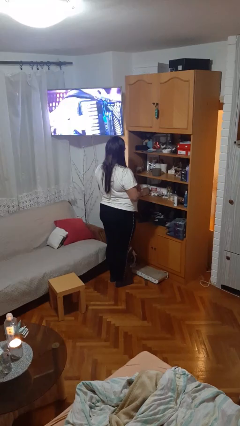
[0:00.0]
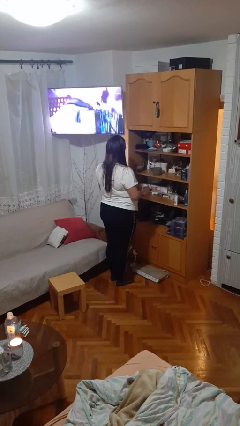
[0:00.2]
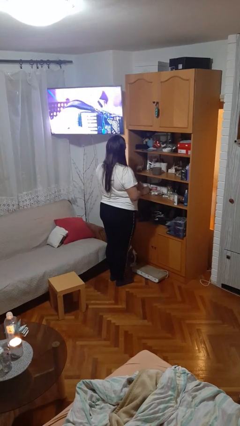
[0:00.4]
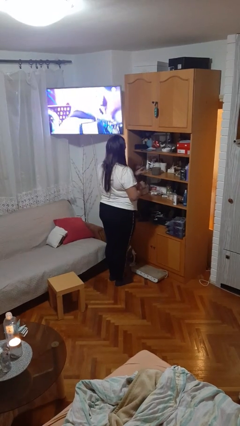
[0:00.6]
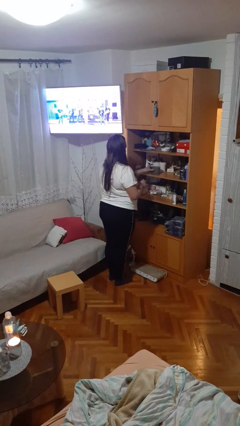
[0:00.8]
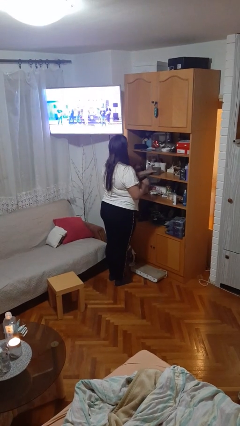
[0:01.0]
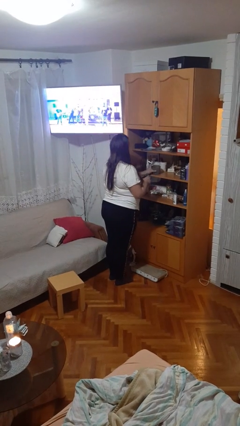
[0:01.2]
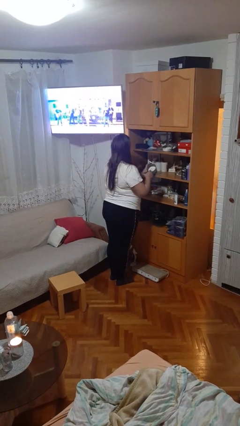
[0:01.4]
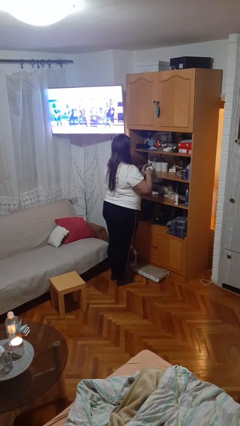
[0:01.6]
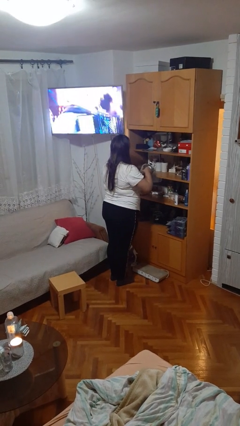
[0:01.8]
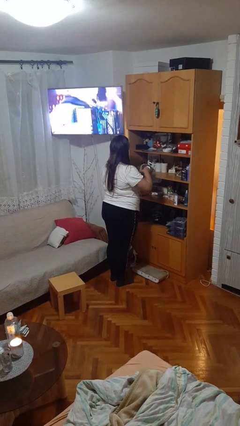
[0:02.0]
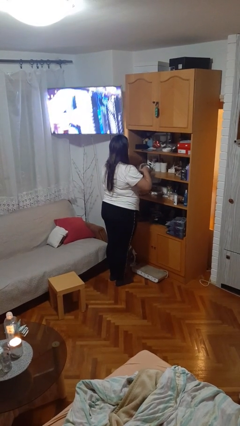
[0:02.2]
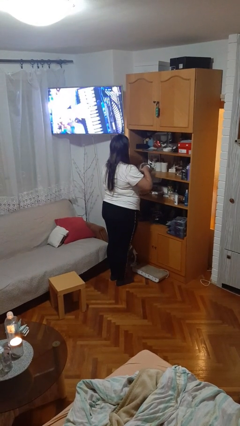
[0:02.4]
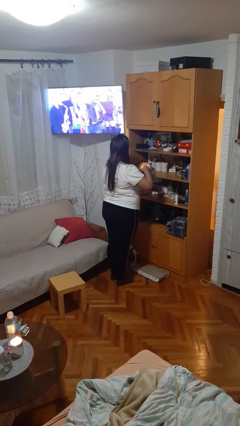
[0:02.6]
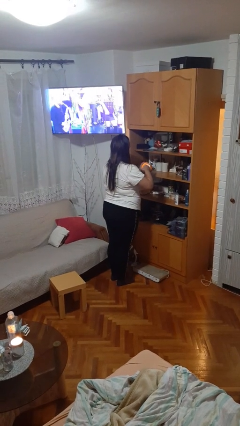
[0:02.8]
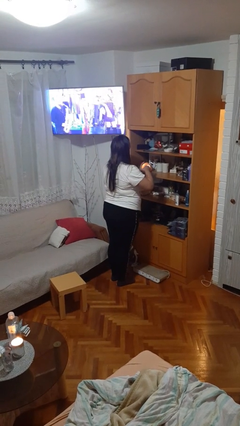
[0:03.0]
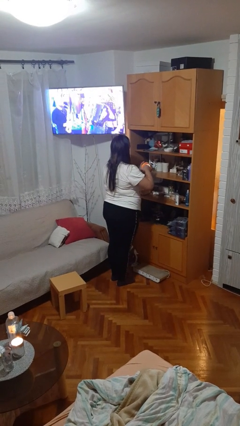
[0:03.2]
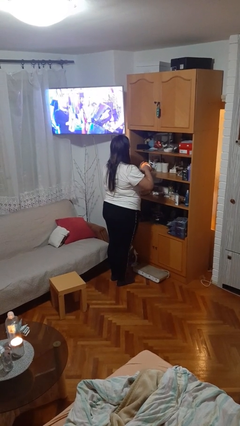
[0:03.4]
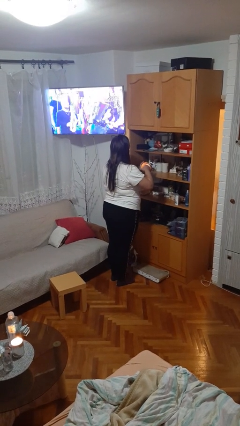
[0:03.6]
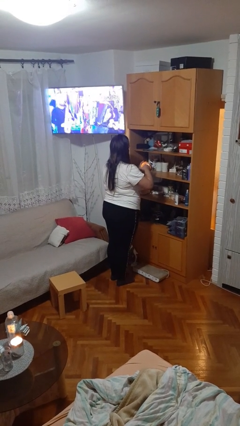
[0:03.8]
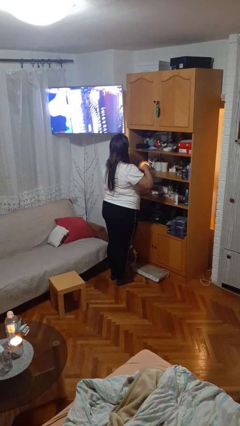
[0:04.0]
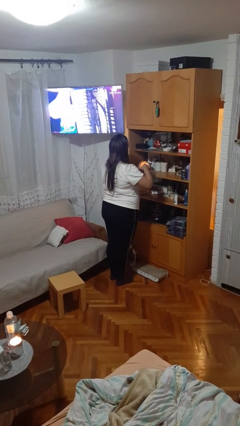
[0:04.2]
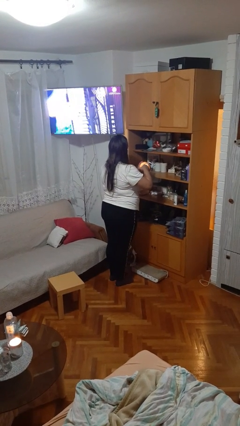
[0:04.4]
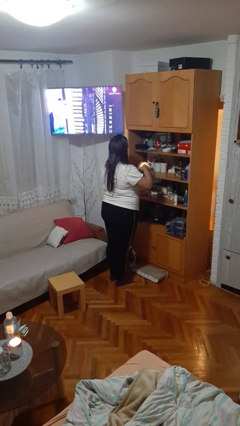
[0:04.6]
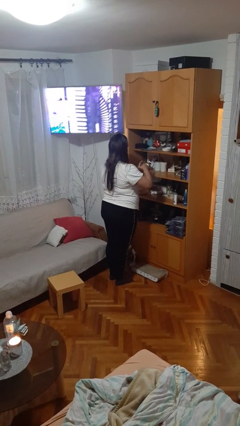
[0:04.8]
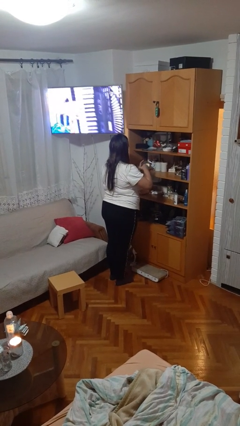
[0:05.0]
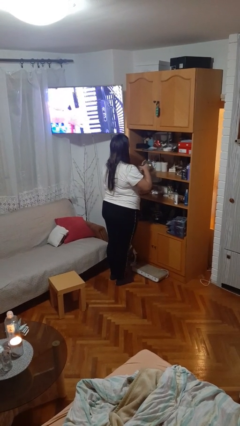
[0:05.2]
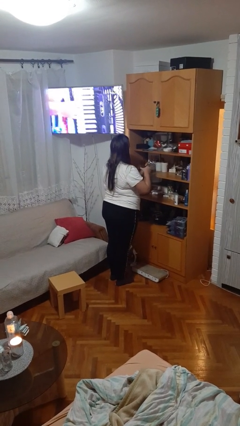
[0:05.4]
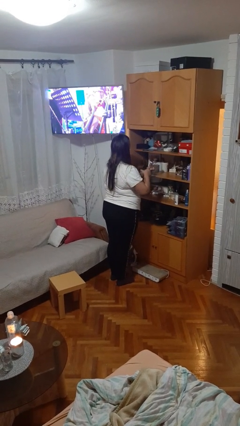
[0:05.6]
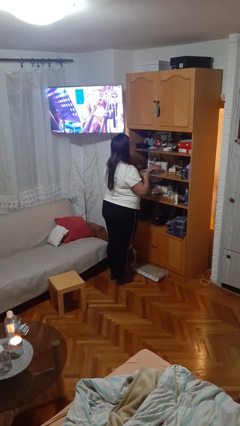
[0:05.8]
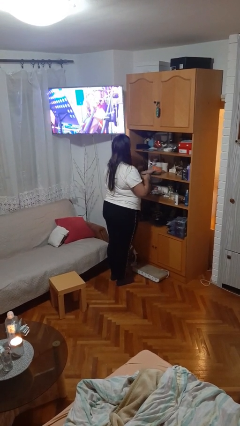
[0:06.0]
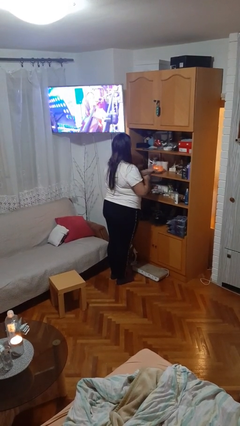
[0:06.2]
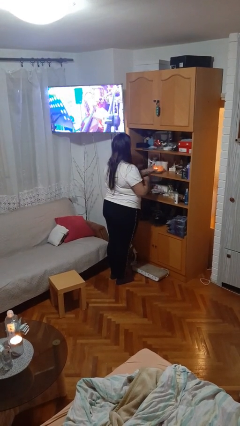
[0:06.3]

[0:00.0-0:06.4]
person lights candle

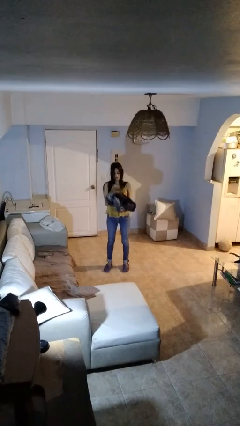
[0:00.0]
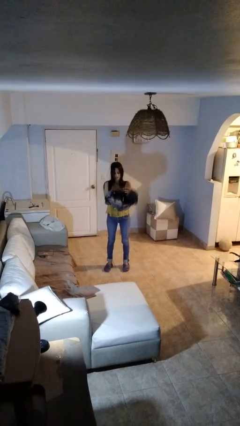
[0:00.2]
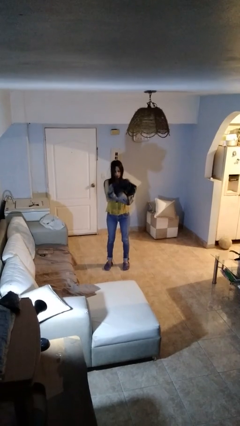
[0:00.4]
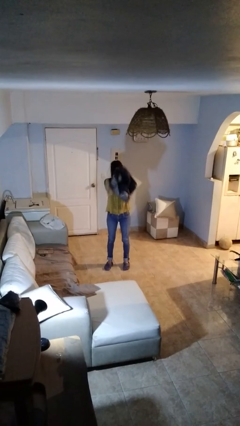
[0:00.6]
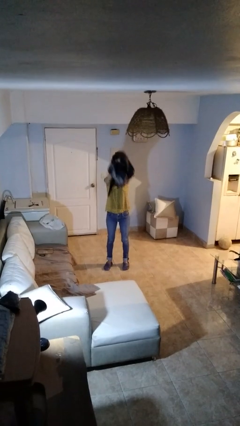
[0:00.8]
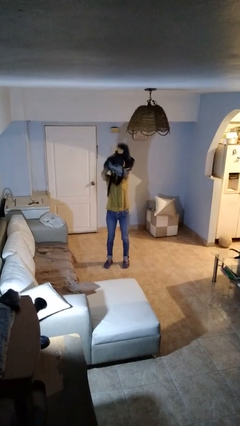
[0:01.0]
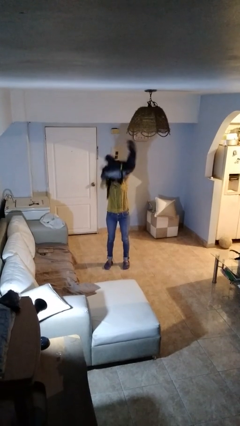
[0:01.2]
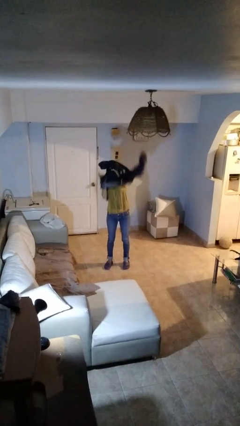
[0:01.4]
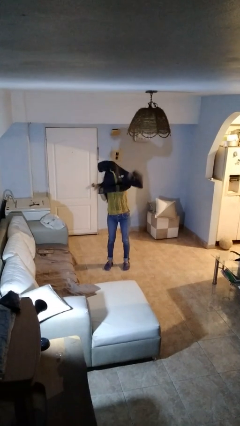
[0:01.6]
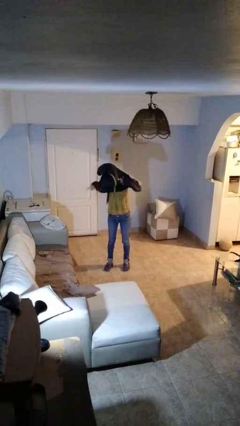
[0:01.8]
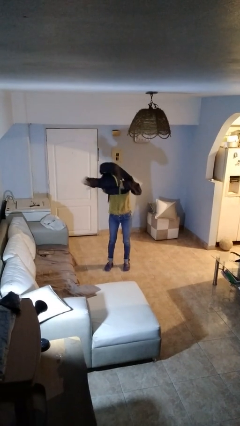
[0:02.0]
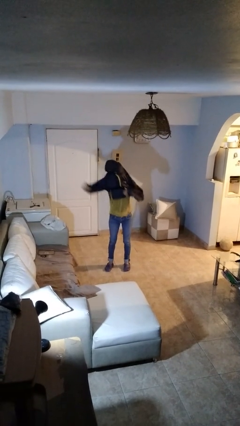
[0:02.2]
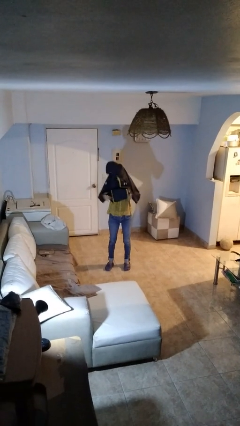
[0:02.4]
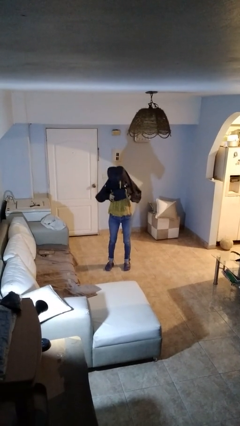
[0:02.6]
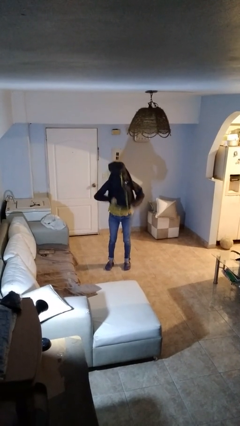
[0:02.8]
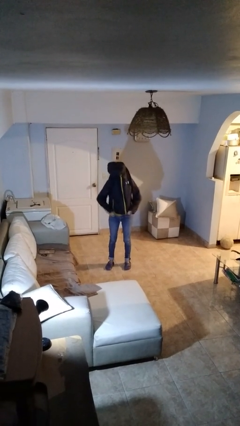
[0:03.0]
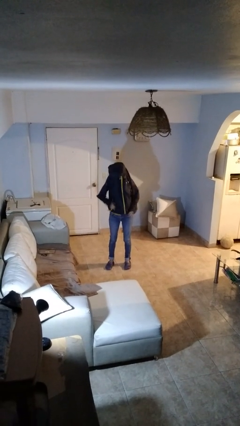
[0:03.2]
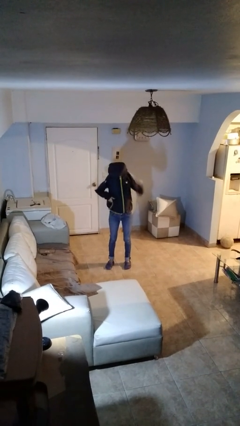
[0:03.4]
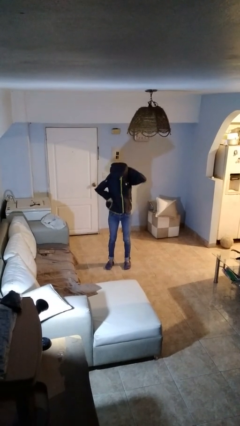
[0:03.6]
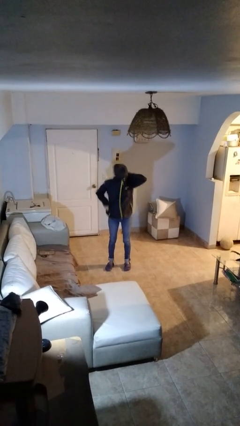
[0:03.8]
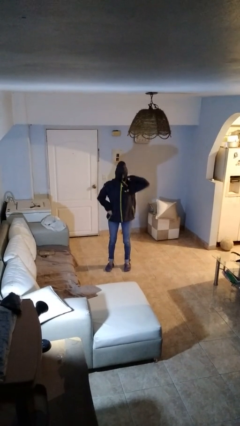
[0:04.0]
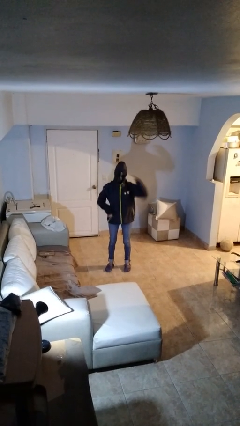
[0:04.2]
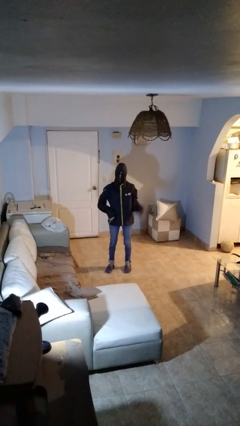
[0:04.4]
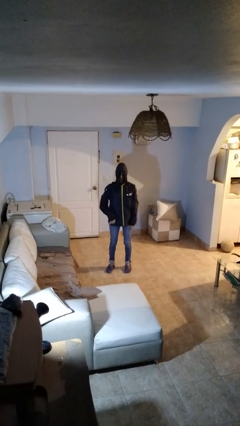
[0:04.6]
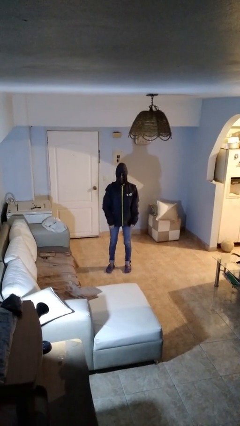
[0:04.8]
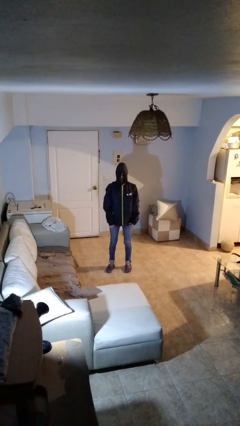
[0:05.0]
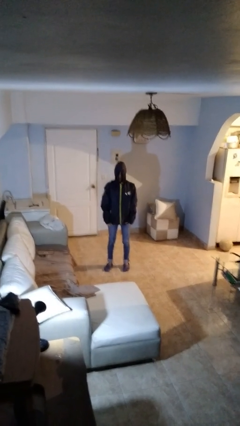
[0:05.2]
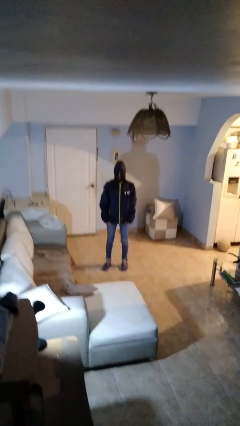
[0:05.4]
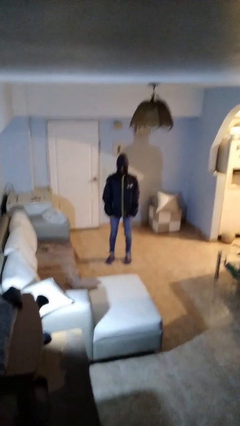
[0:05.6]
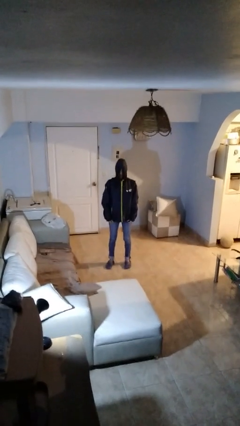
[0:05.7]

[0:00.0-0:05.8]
person puts on hoodie

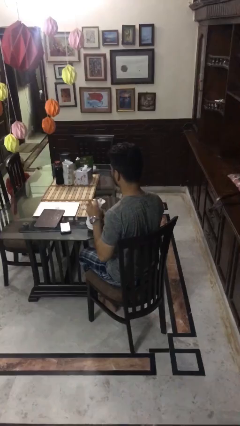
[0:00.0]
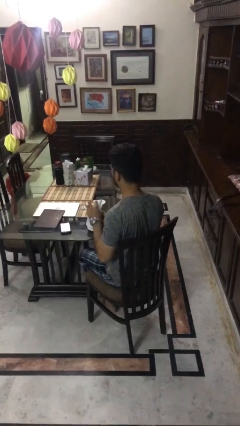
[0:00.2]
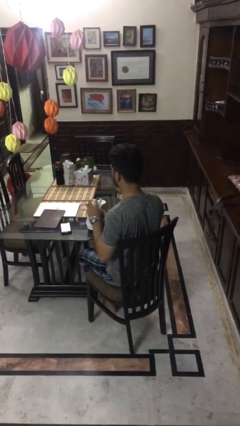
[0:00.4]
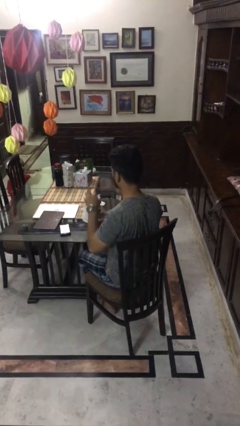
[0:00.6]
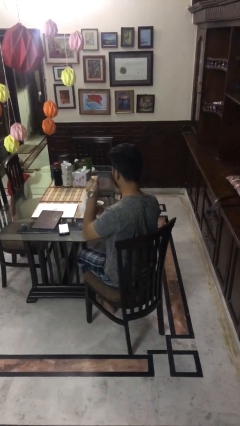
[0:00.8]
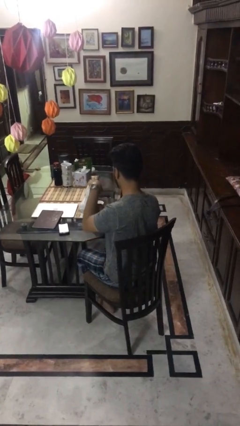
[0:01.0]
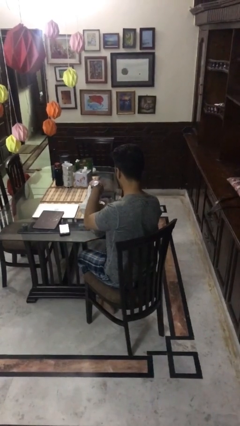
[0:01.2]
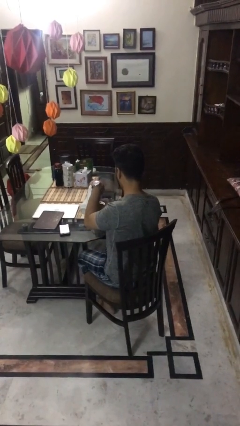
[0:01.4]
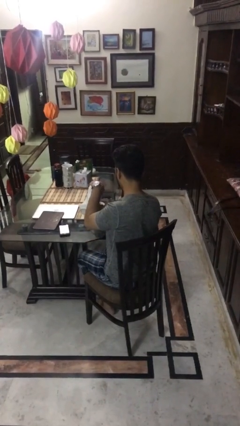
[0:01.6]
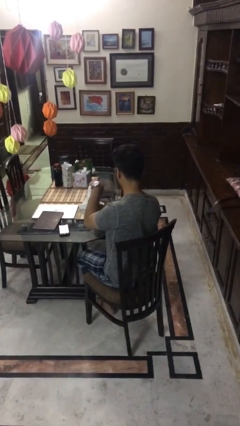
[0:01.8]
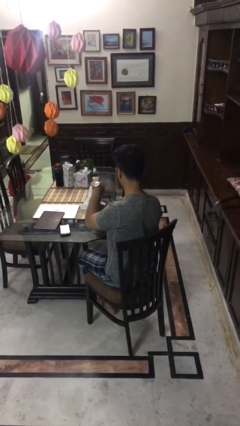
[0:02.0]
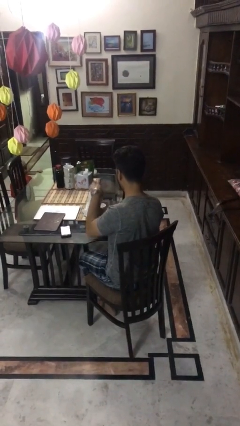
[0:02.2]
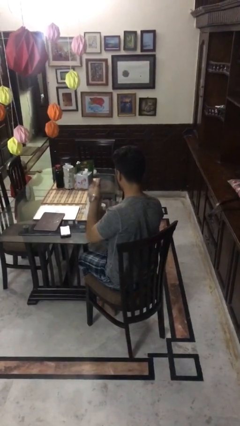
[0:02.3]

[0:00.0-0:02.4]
person pours coffee into mug

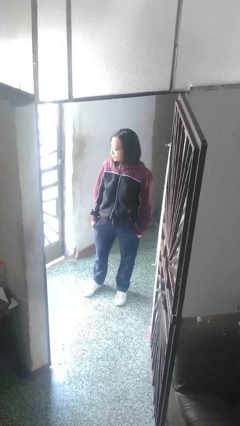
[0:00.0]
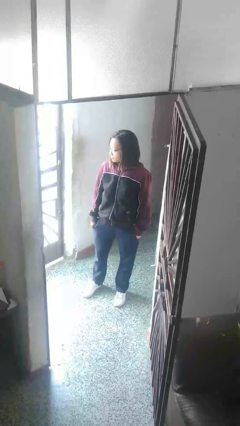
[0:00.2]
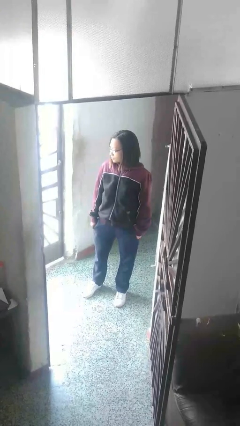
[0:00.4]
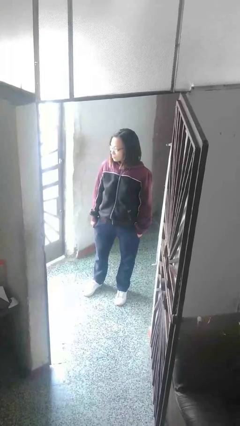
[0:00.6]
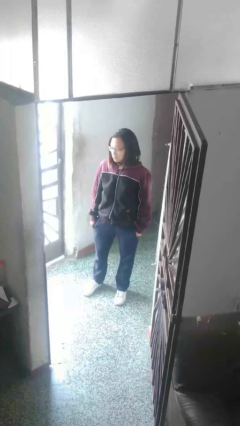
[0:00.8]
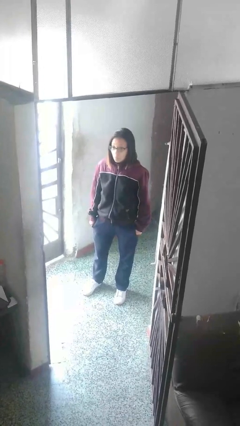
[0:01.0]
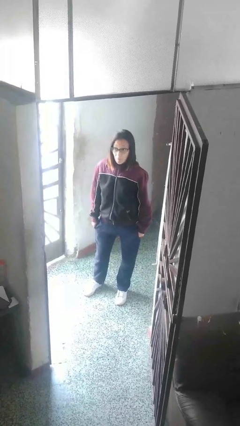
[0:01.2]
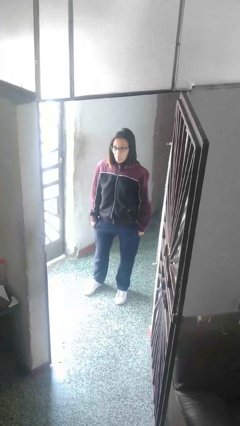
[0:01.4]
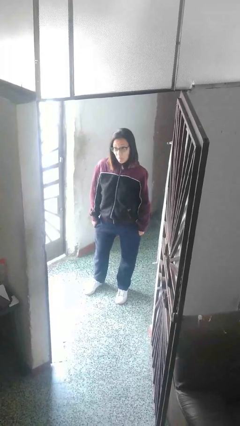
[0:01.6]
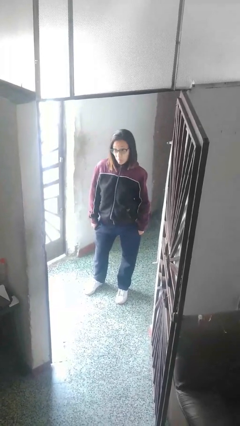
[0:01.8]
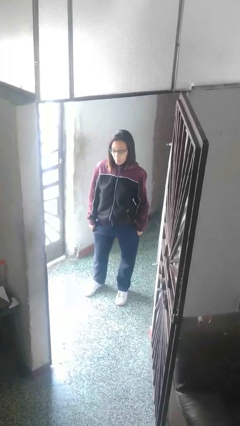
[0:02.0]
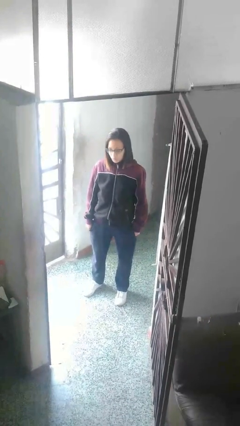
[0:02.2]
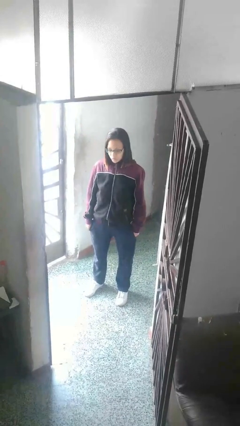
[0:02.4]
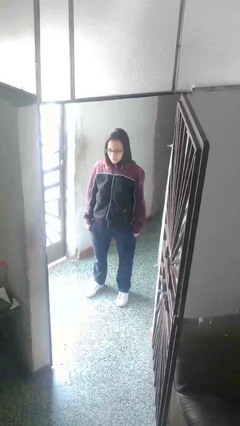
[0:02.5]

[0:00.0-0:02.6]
person sticks out tongue

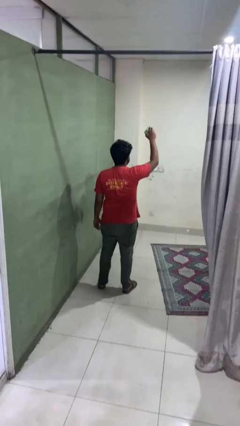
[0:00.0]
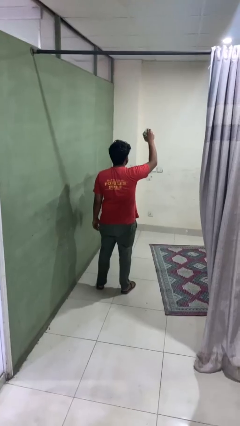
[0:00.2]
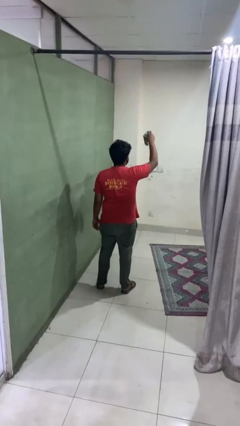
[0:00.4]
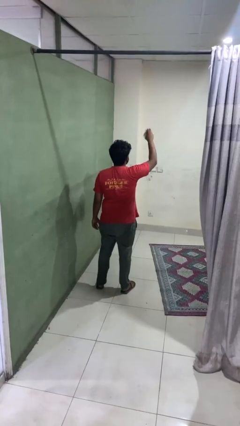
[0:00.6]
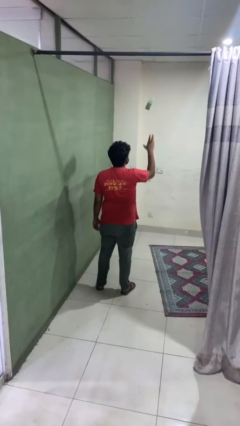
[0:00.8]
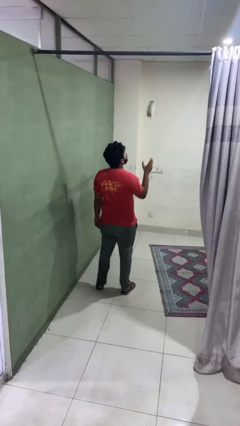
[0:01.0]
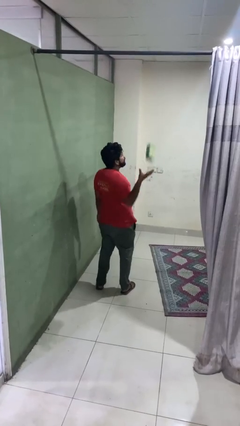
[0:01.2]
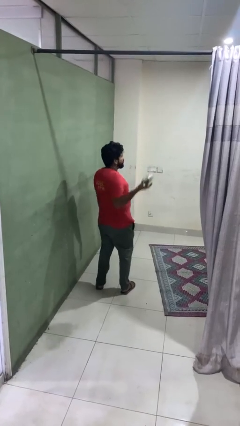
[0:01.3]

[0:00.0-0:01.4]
person drops object
